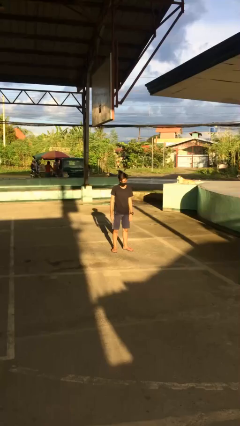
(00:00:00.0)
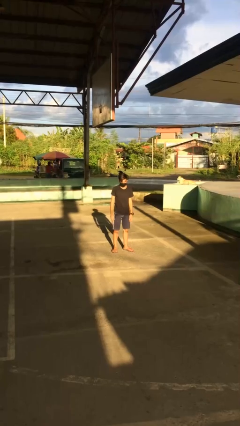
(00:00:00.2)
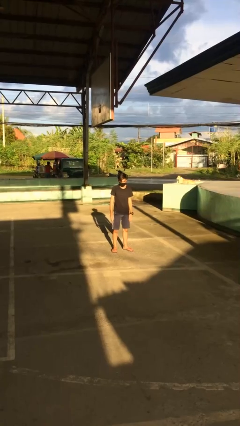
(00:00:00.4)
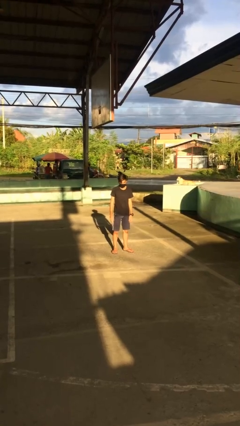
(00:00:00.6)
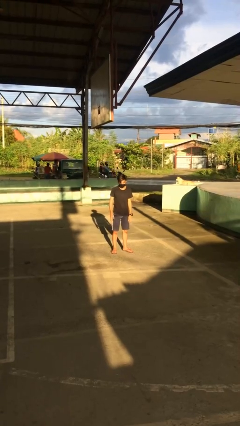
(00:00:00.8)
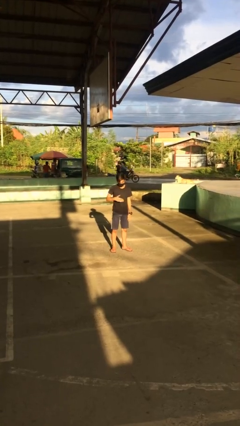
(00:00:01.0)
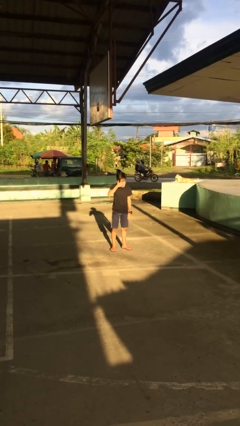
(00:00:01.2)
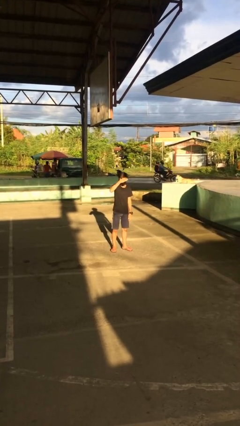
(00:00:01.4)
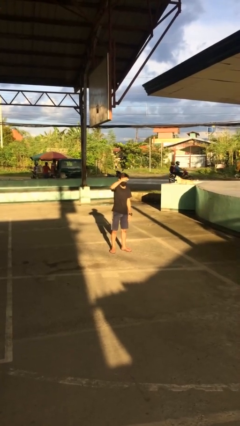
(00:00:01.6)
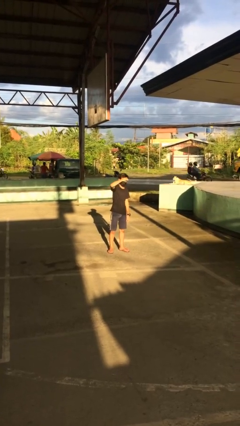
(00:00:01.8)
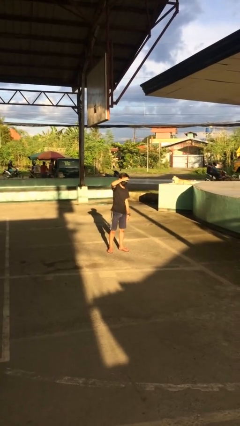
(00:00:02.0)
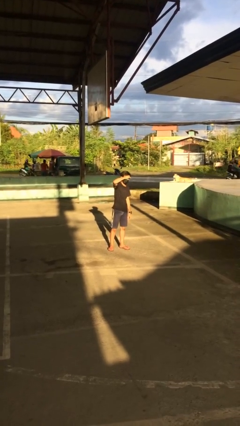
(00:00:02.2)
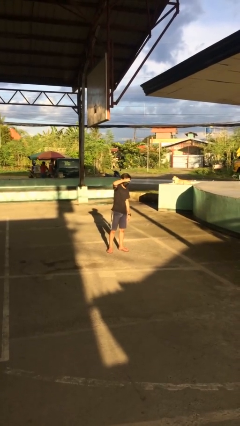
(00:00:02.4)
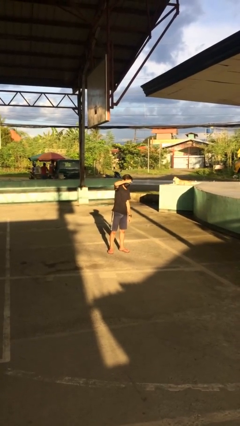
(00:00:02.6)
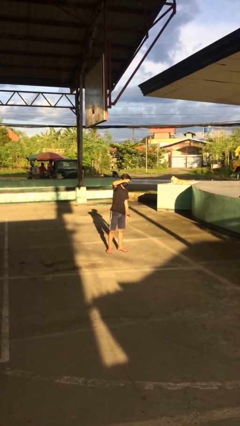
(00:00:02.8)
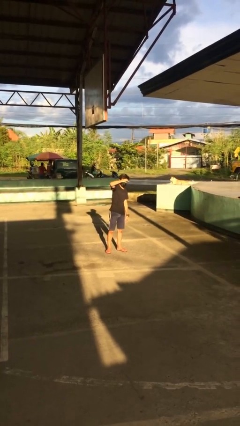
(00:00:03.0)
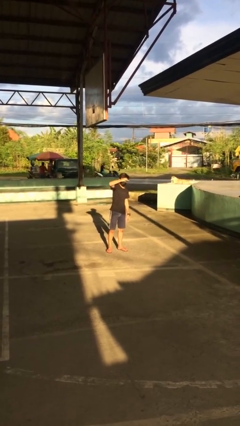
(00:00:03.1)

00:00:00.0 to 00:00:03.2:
person shades eyes

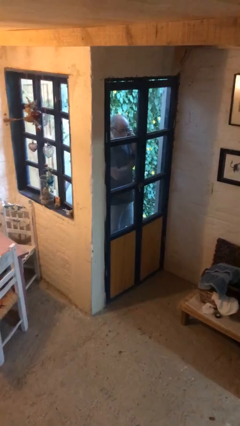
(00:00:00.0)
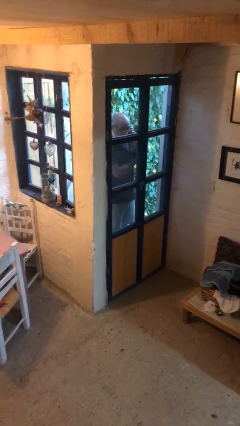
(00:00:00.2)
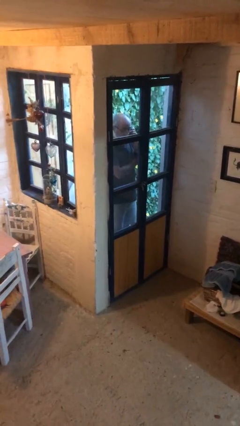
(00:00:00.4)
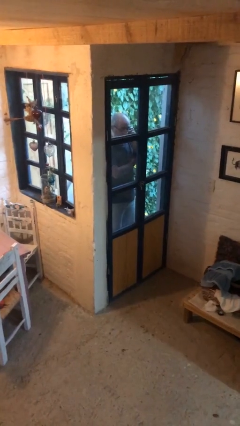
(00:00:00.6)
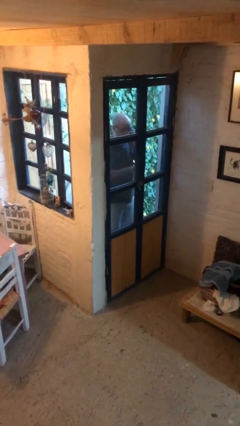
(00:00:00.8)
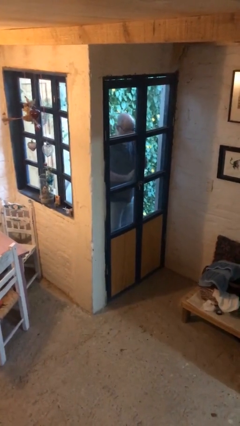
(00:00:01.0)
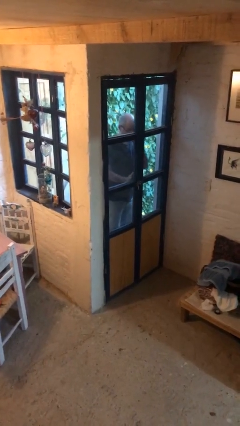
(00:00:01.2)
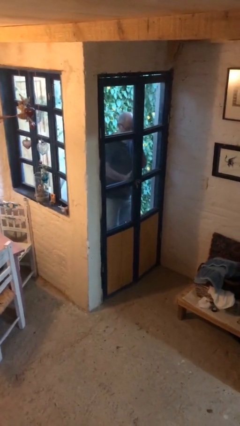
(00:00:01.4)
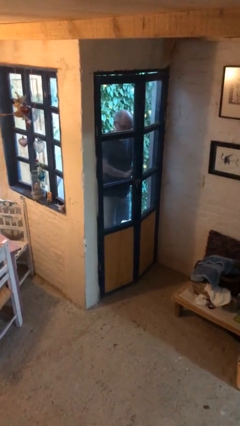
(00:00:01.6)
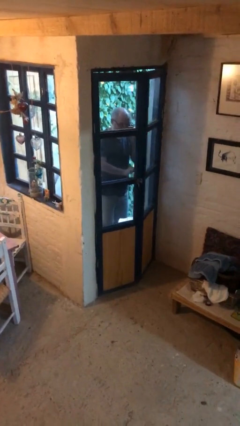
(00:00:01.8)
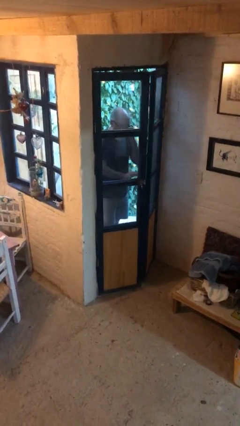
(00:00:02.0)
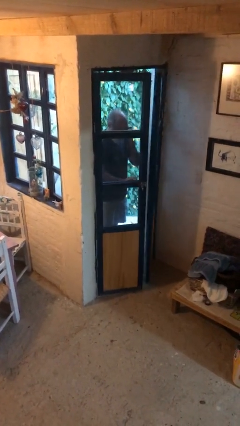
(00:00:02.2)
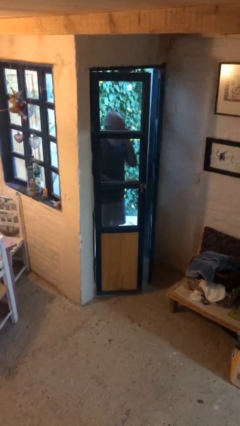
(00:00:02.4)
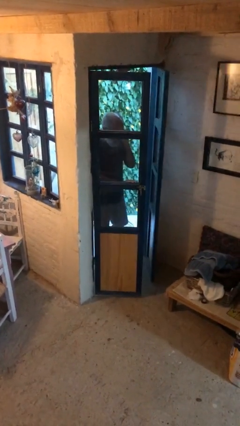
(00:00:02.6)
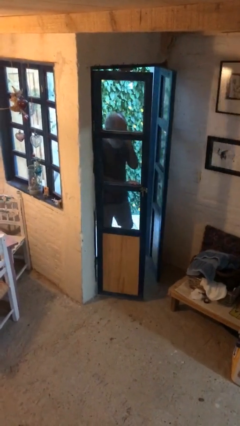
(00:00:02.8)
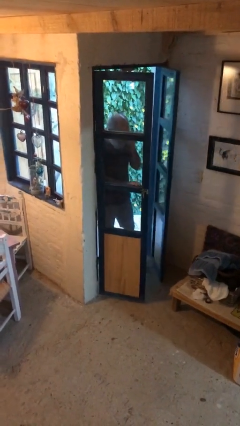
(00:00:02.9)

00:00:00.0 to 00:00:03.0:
person opens facility door

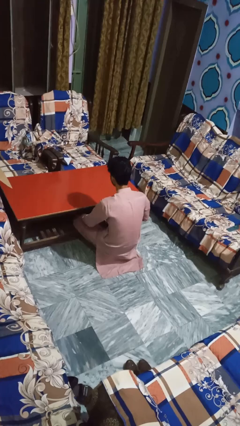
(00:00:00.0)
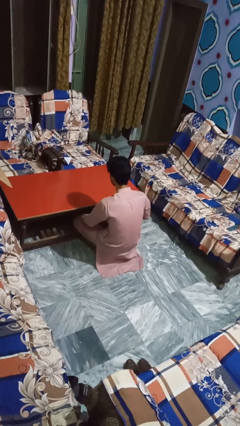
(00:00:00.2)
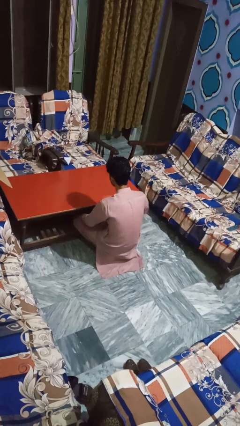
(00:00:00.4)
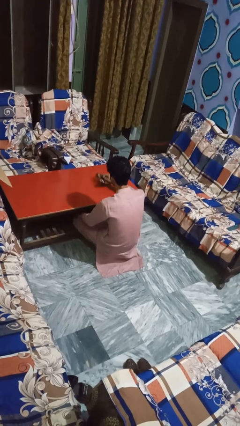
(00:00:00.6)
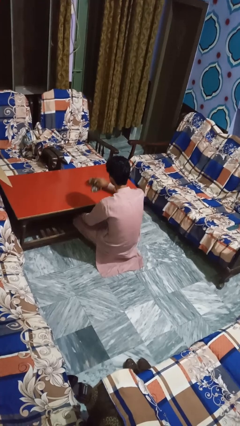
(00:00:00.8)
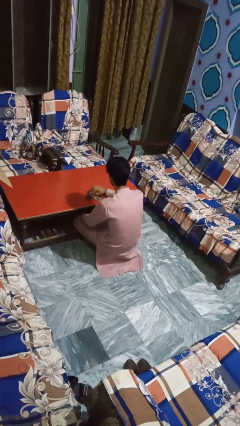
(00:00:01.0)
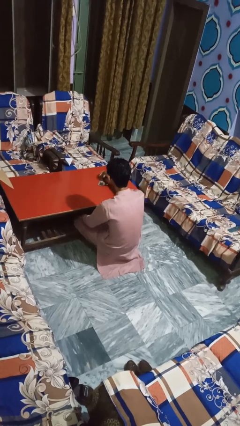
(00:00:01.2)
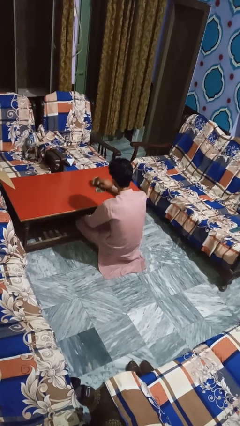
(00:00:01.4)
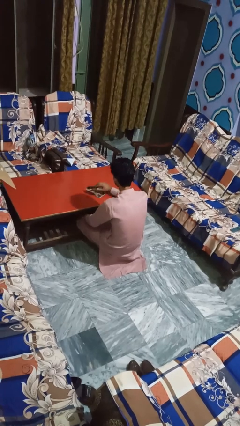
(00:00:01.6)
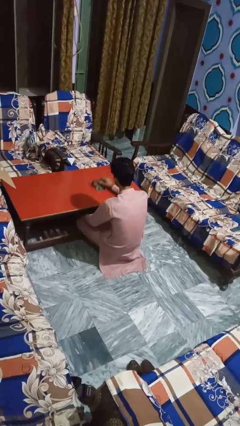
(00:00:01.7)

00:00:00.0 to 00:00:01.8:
person cleans table with rag

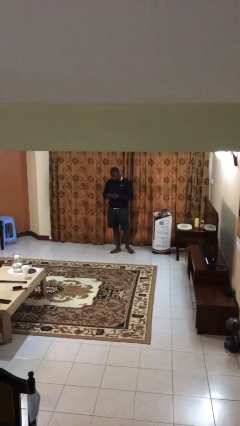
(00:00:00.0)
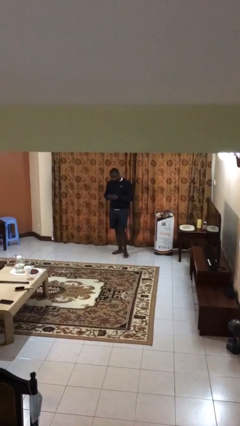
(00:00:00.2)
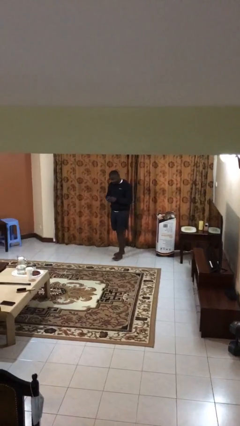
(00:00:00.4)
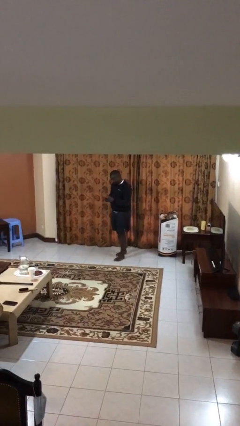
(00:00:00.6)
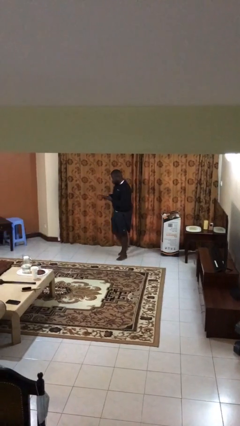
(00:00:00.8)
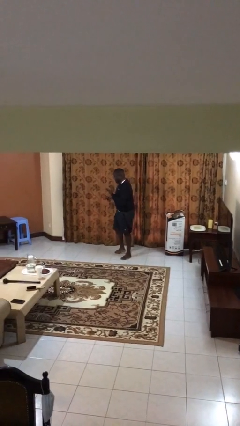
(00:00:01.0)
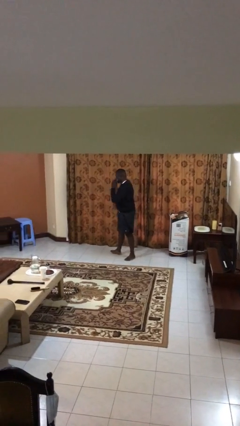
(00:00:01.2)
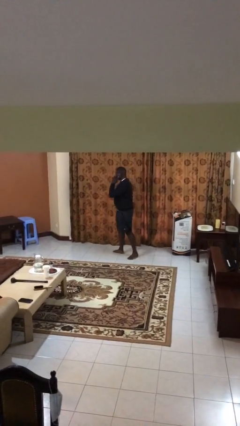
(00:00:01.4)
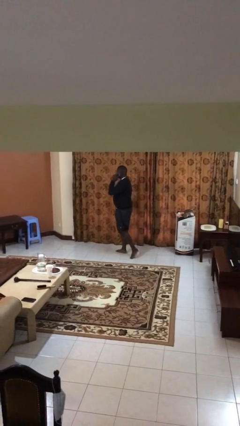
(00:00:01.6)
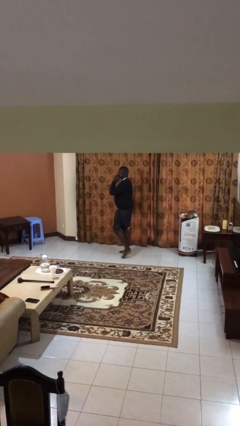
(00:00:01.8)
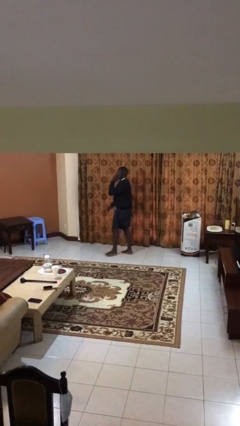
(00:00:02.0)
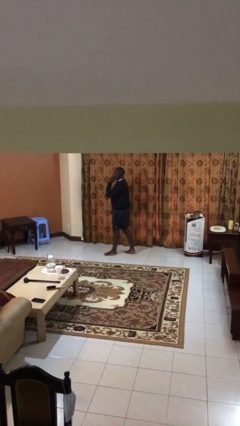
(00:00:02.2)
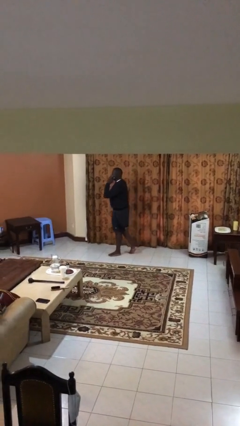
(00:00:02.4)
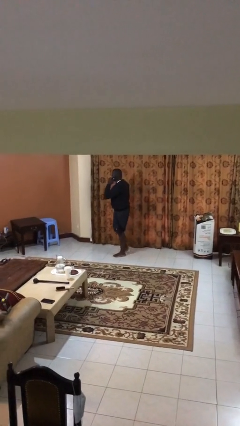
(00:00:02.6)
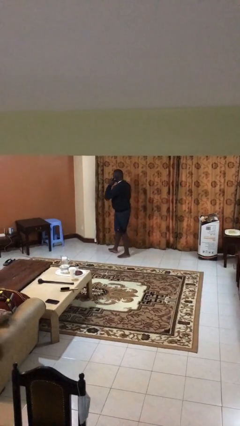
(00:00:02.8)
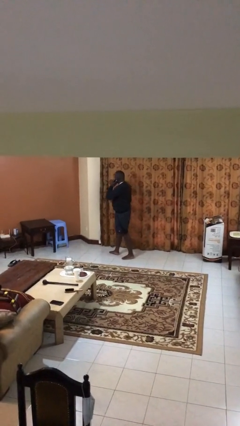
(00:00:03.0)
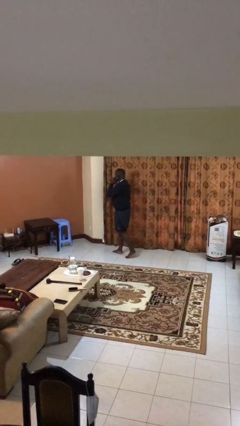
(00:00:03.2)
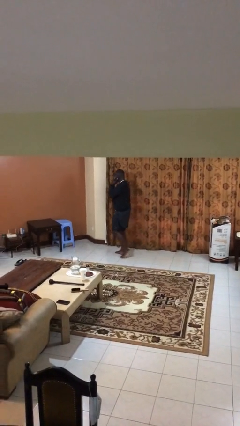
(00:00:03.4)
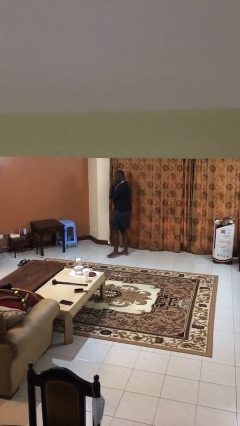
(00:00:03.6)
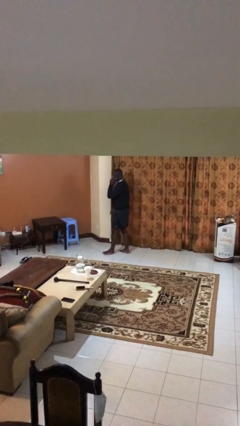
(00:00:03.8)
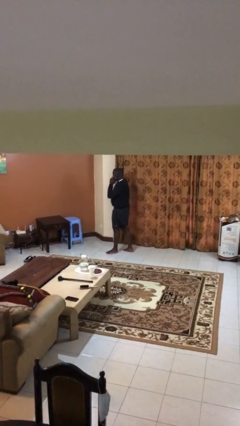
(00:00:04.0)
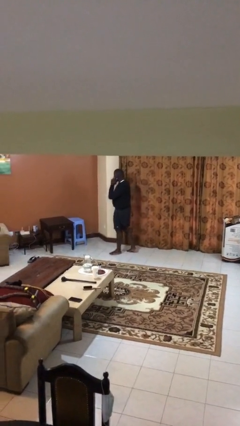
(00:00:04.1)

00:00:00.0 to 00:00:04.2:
person talks on phone

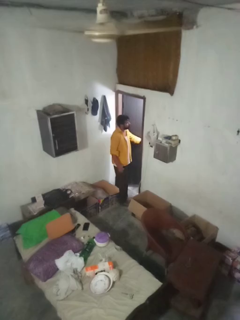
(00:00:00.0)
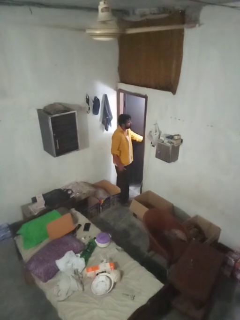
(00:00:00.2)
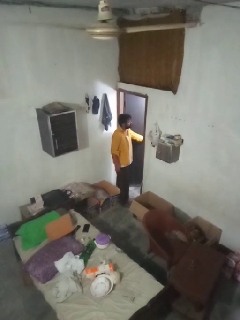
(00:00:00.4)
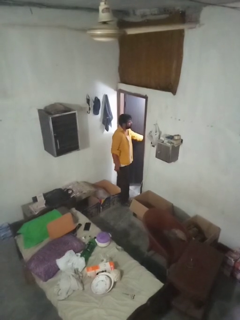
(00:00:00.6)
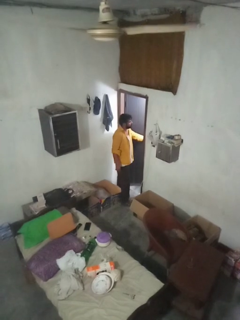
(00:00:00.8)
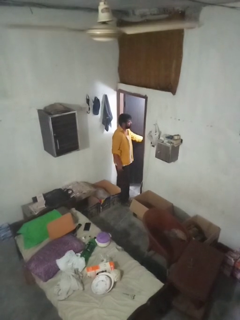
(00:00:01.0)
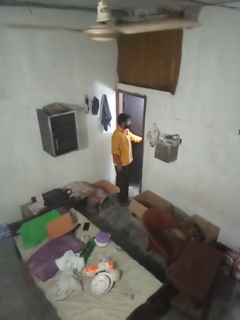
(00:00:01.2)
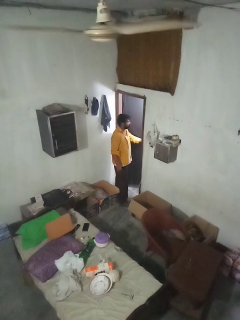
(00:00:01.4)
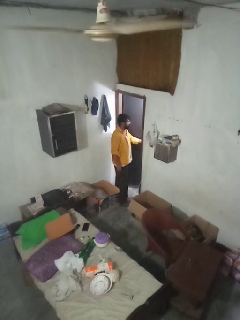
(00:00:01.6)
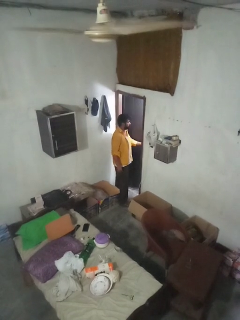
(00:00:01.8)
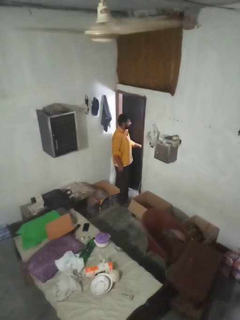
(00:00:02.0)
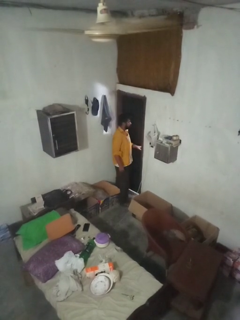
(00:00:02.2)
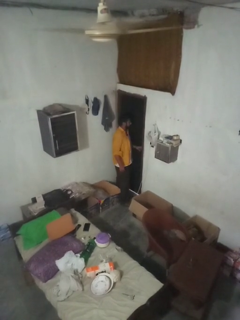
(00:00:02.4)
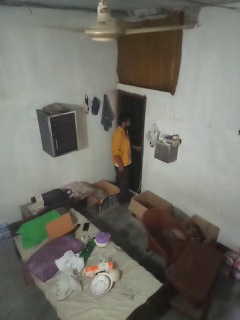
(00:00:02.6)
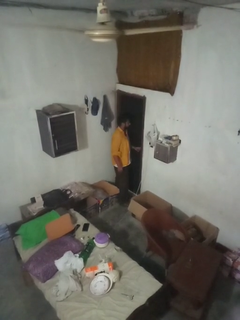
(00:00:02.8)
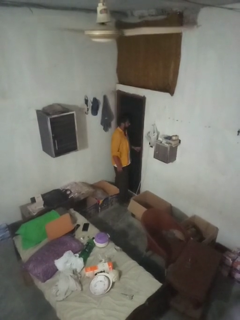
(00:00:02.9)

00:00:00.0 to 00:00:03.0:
person closes facility door

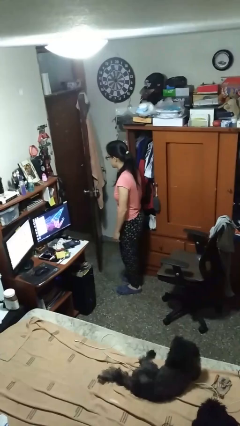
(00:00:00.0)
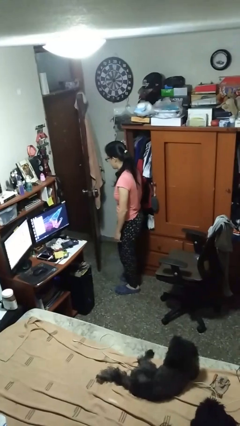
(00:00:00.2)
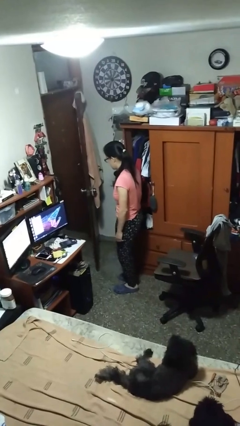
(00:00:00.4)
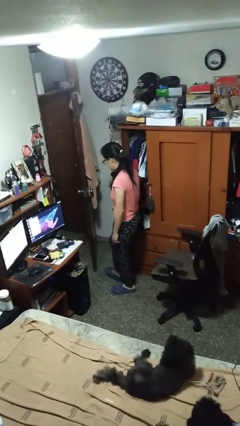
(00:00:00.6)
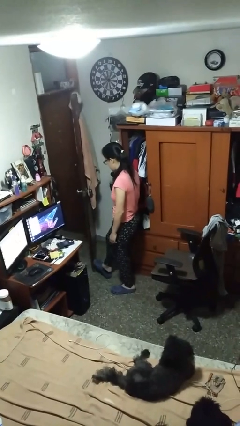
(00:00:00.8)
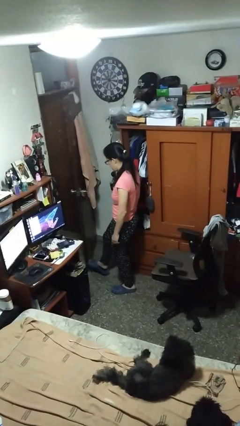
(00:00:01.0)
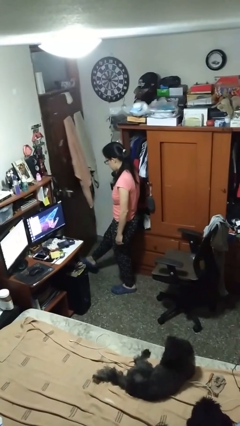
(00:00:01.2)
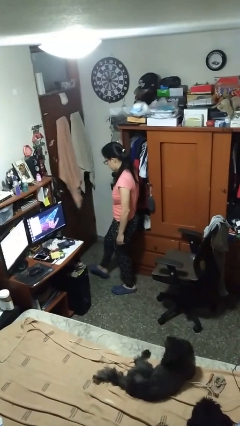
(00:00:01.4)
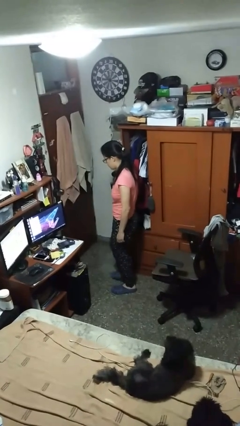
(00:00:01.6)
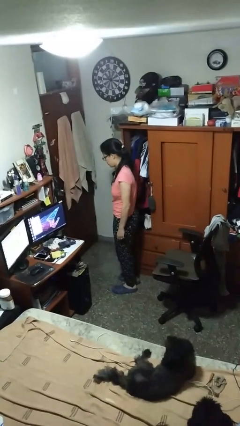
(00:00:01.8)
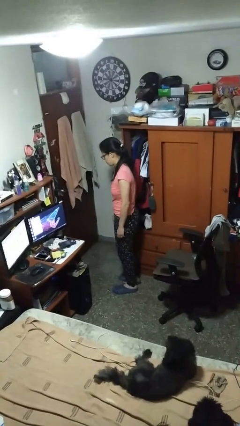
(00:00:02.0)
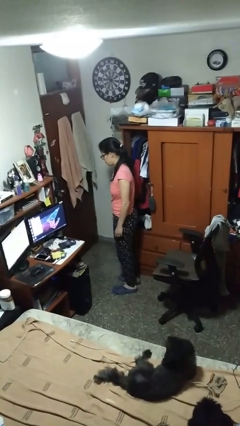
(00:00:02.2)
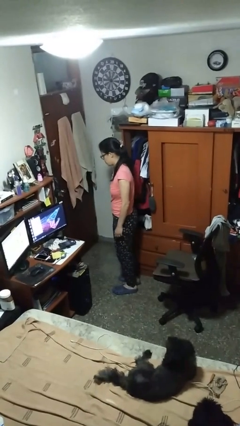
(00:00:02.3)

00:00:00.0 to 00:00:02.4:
person closes door with foot
